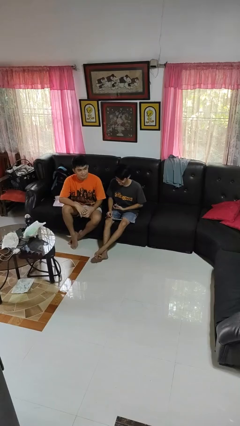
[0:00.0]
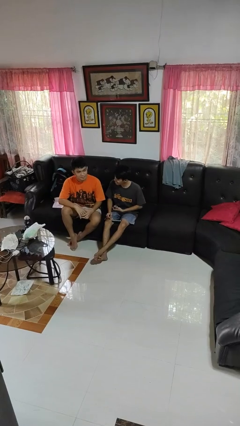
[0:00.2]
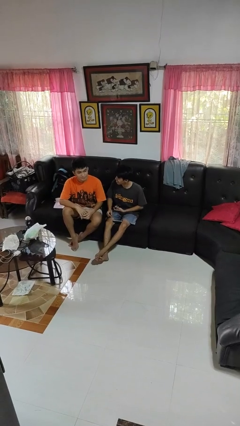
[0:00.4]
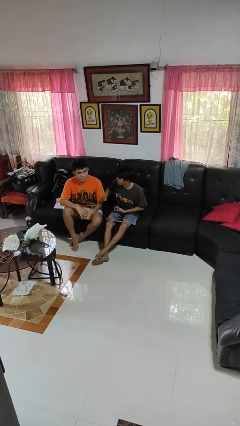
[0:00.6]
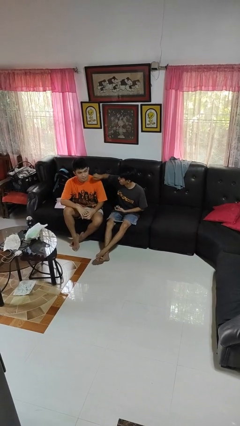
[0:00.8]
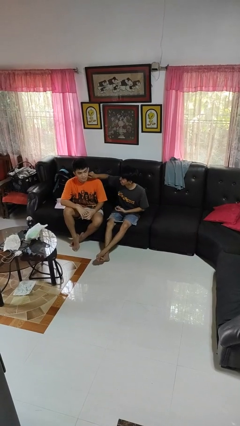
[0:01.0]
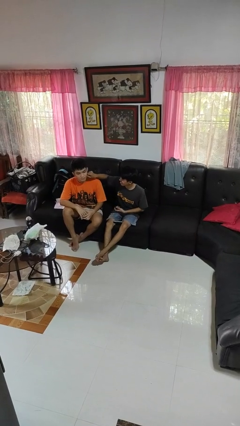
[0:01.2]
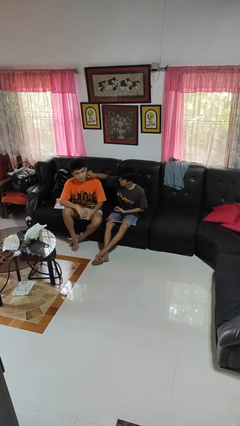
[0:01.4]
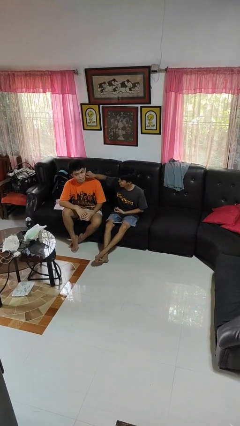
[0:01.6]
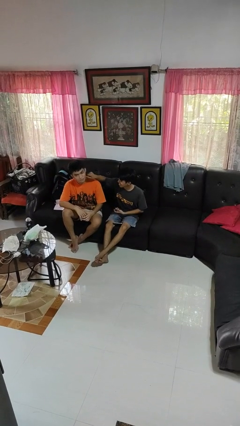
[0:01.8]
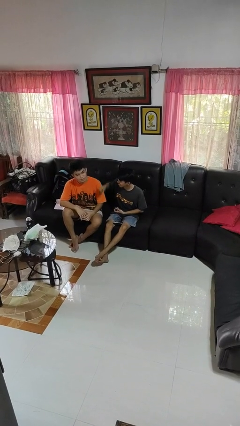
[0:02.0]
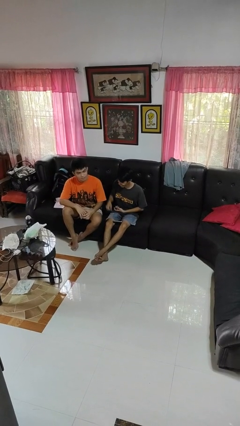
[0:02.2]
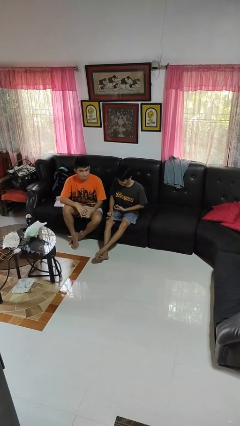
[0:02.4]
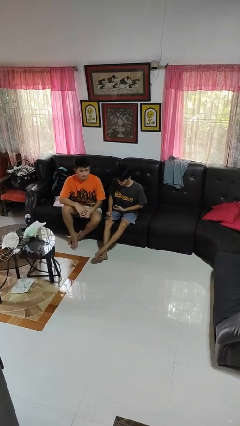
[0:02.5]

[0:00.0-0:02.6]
person touches face of person

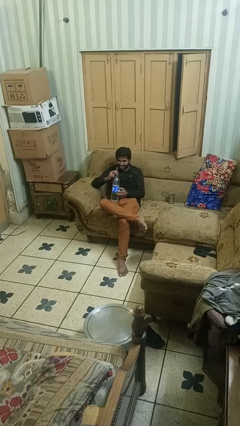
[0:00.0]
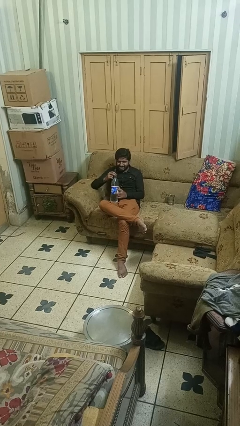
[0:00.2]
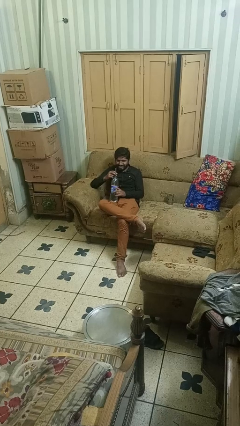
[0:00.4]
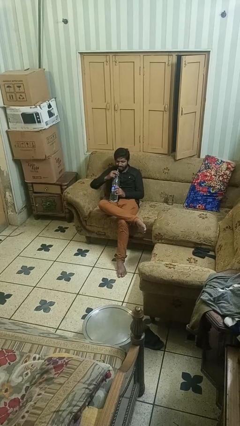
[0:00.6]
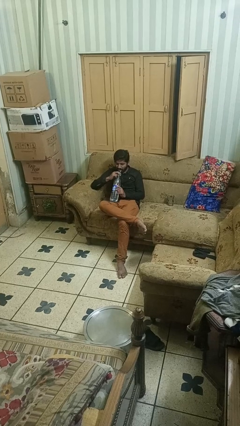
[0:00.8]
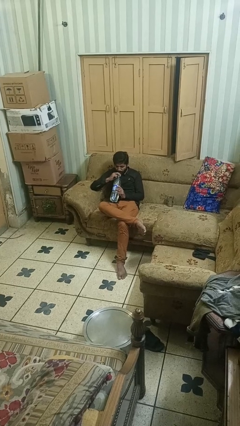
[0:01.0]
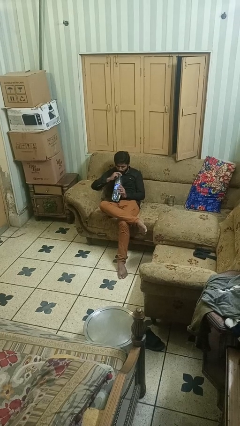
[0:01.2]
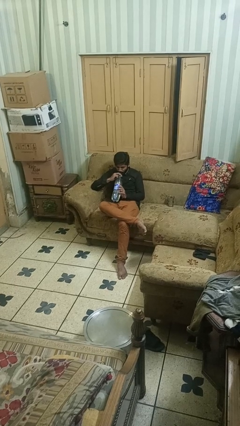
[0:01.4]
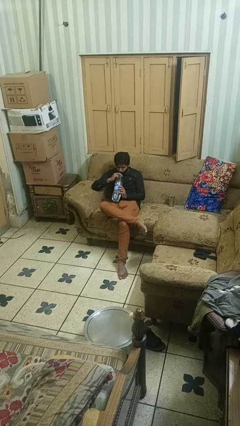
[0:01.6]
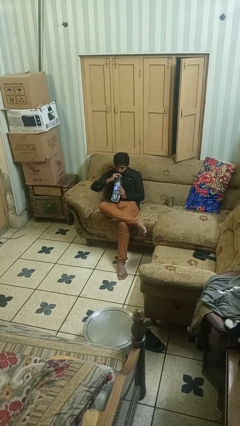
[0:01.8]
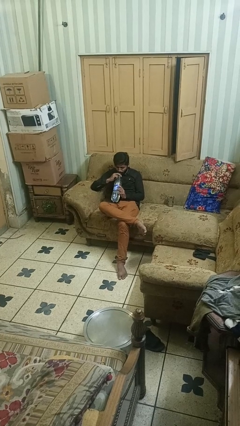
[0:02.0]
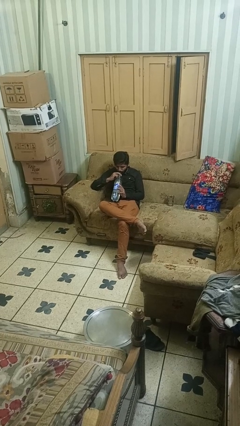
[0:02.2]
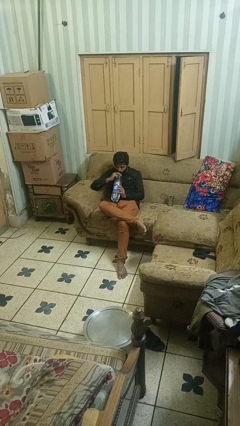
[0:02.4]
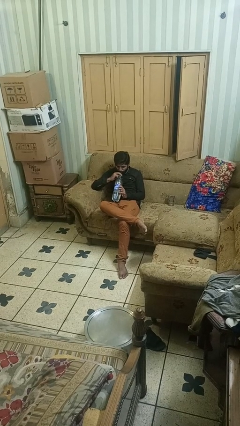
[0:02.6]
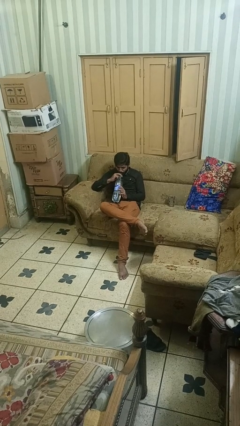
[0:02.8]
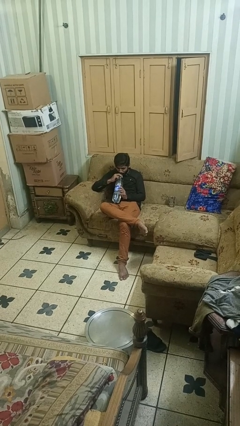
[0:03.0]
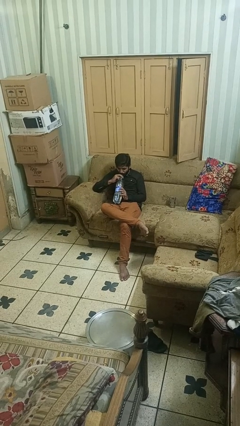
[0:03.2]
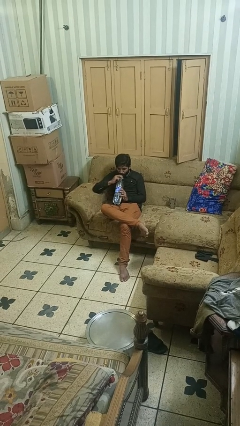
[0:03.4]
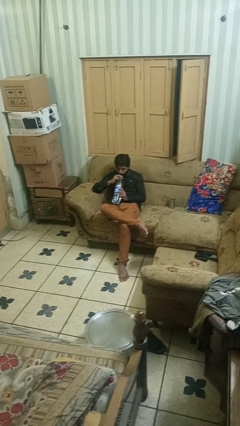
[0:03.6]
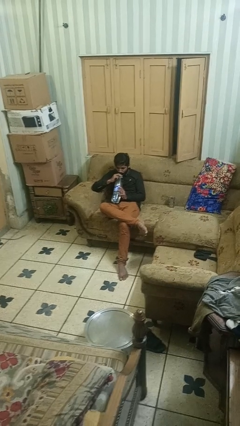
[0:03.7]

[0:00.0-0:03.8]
person drinks from straw

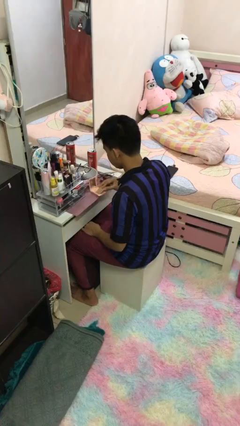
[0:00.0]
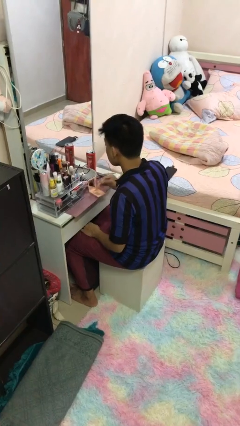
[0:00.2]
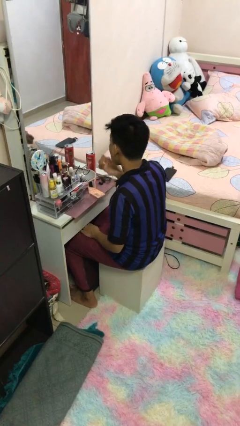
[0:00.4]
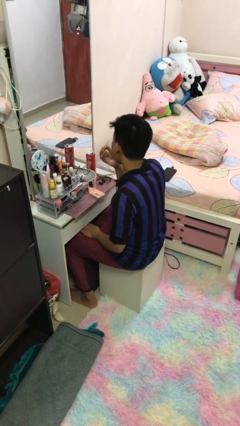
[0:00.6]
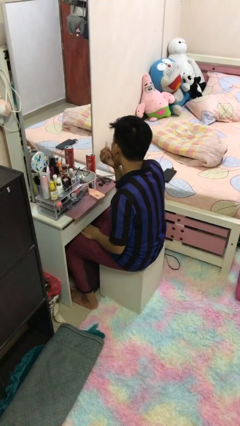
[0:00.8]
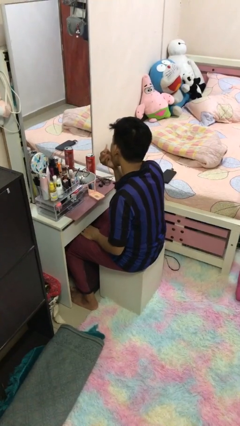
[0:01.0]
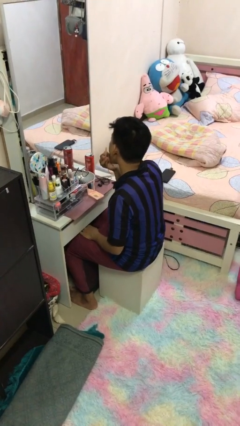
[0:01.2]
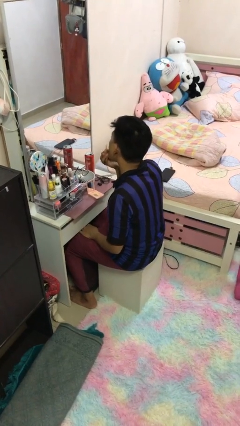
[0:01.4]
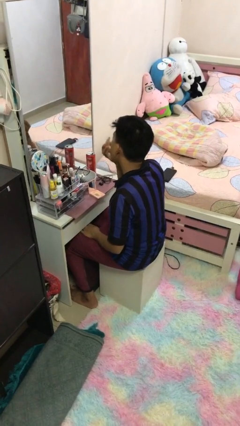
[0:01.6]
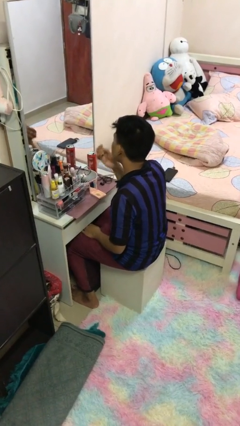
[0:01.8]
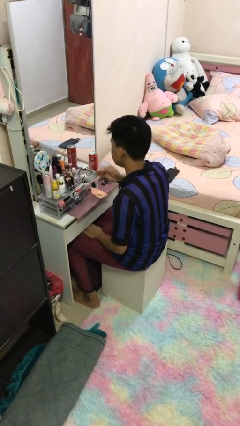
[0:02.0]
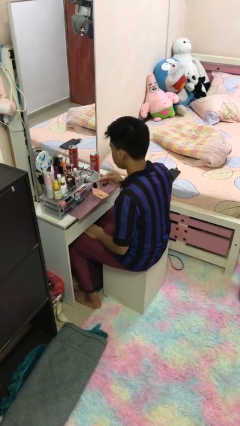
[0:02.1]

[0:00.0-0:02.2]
person applies foundation makeup

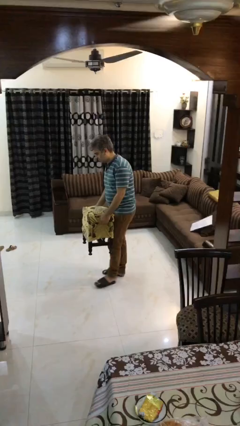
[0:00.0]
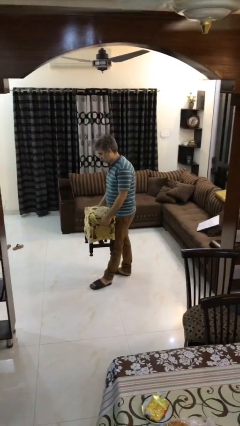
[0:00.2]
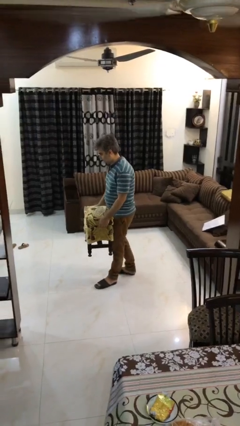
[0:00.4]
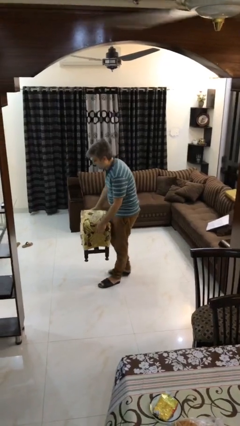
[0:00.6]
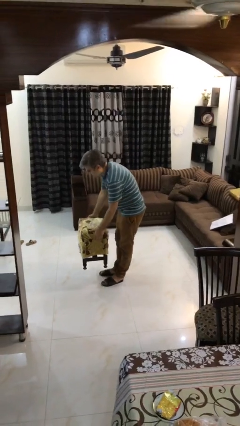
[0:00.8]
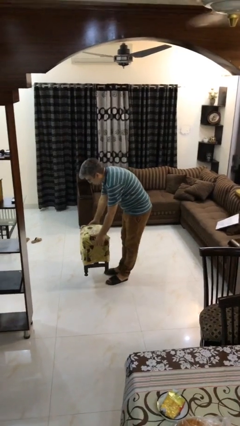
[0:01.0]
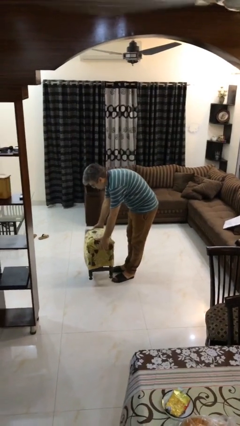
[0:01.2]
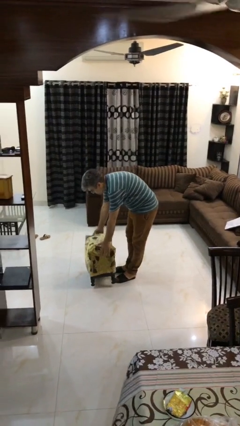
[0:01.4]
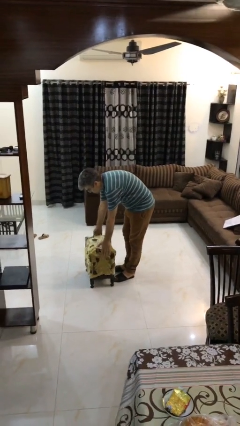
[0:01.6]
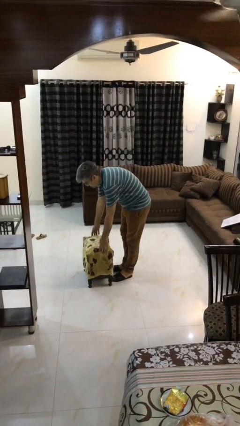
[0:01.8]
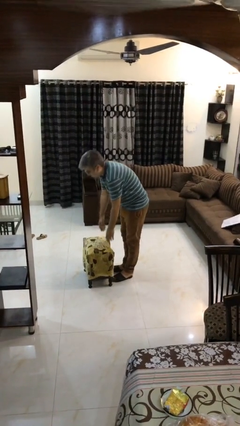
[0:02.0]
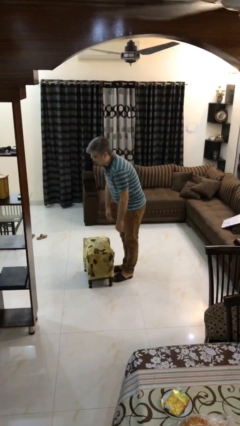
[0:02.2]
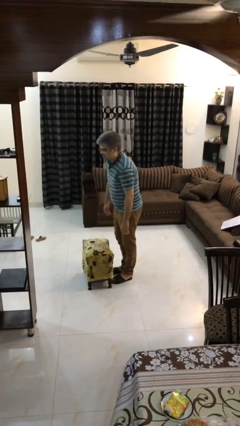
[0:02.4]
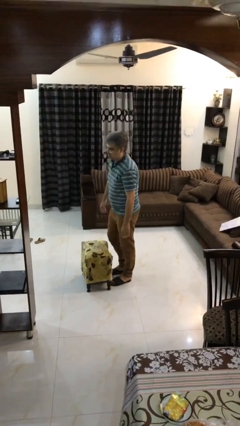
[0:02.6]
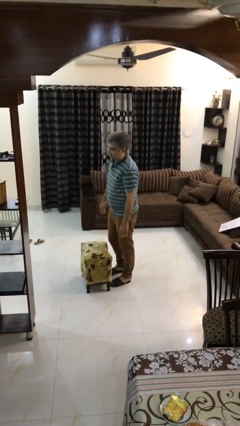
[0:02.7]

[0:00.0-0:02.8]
person puts down object on floor

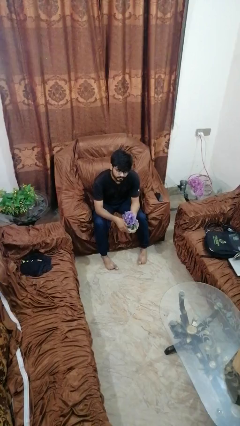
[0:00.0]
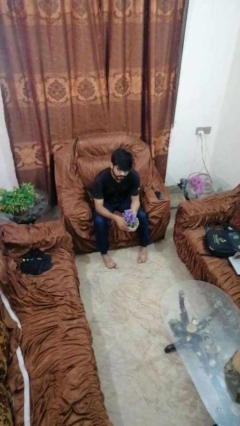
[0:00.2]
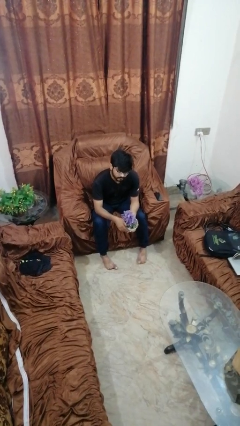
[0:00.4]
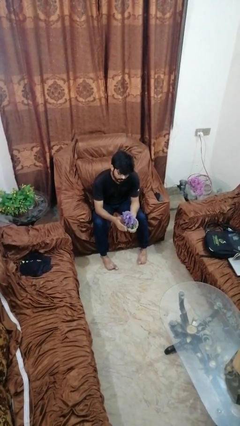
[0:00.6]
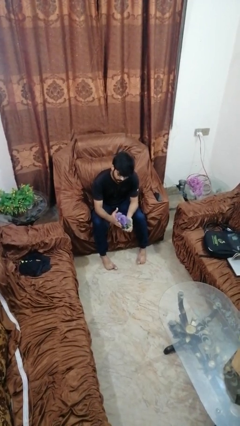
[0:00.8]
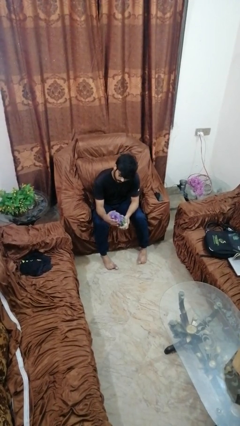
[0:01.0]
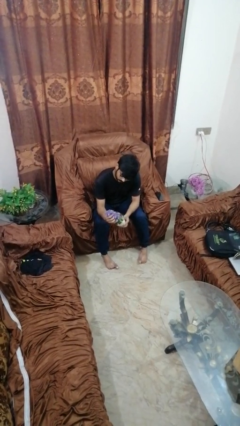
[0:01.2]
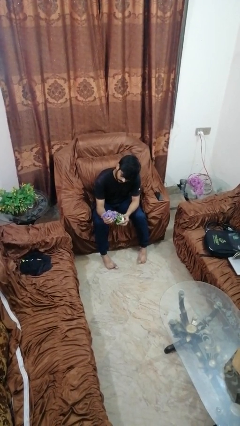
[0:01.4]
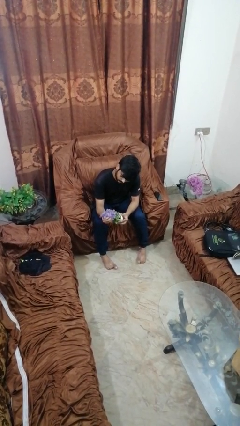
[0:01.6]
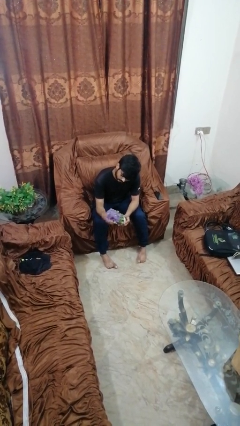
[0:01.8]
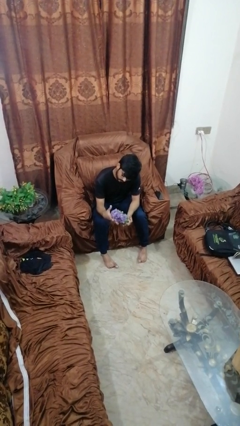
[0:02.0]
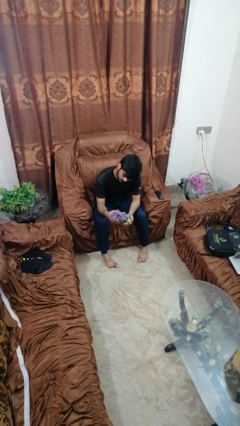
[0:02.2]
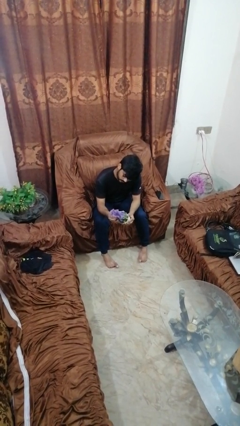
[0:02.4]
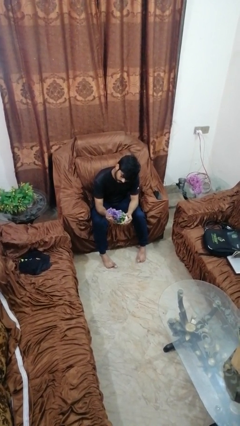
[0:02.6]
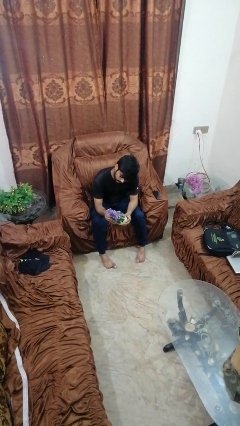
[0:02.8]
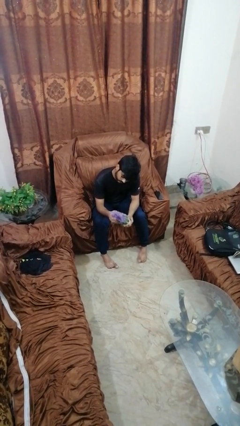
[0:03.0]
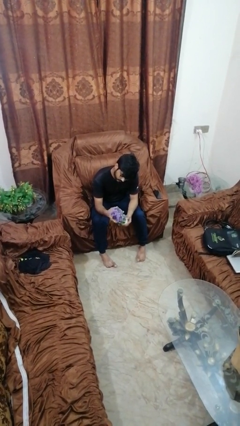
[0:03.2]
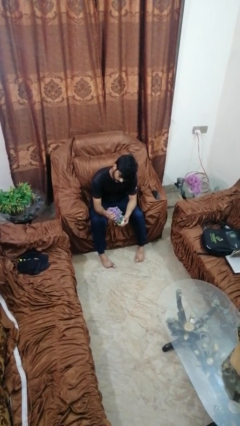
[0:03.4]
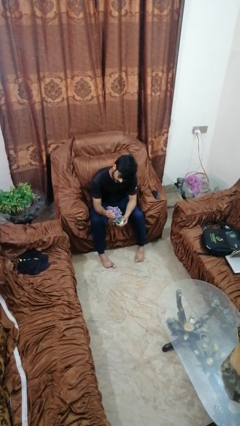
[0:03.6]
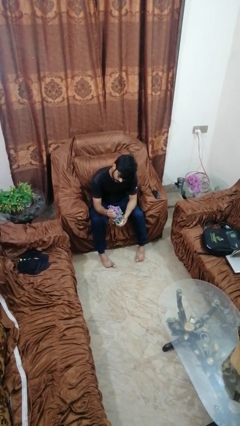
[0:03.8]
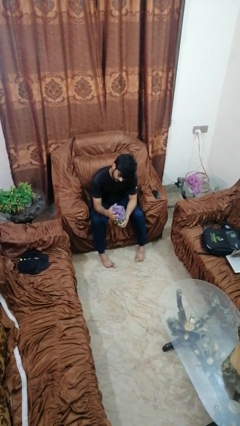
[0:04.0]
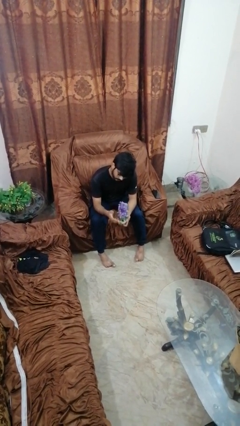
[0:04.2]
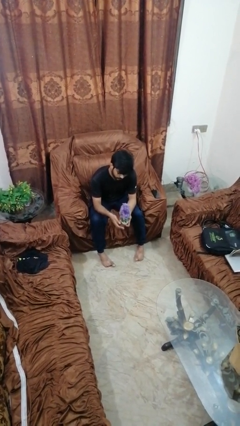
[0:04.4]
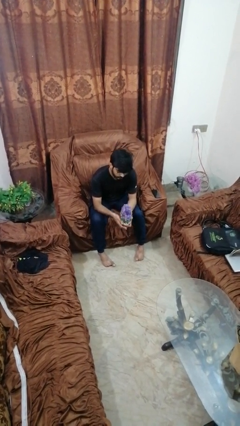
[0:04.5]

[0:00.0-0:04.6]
person squeezes object

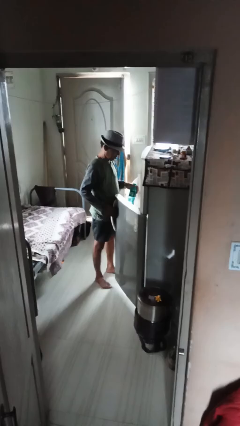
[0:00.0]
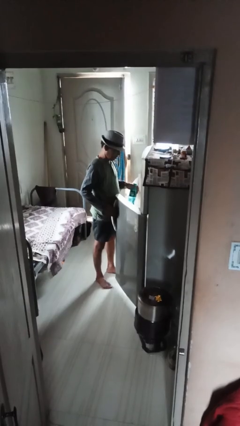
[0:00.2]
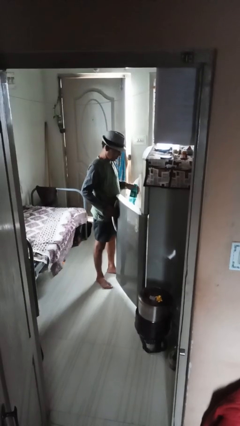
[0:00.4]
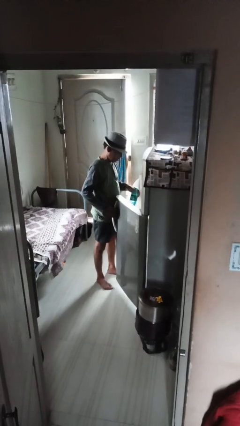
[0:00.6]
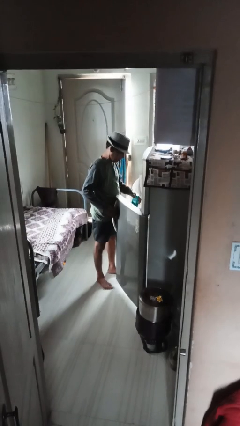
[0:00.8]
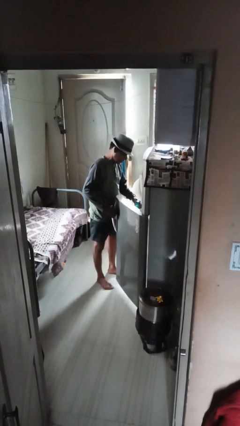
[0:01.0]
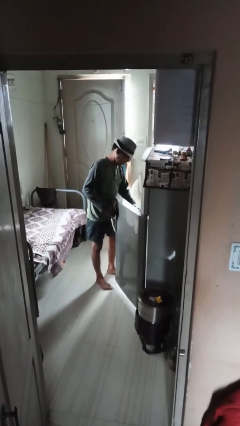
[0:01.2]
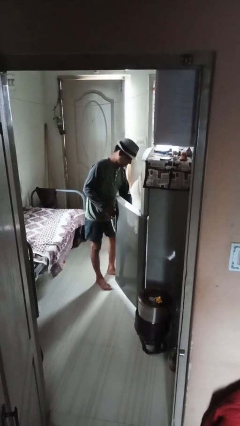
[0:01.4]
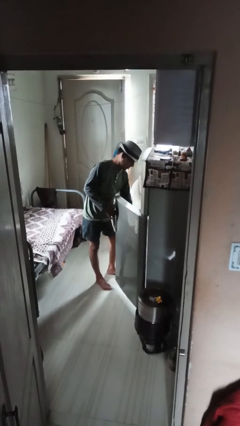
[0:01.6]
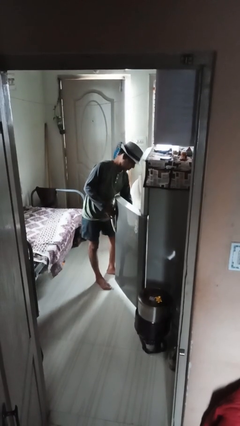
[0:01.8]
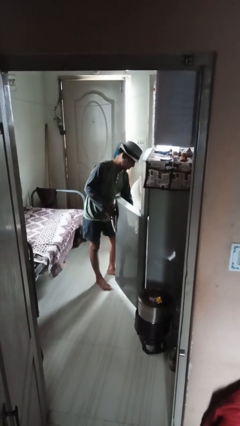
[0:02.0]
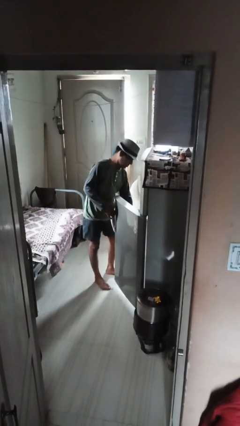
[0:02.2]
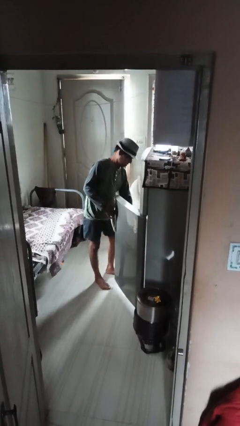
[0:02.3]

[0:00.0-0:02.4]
person puts object into refrigerator
